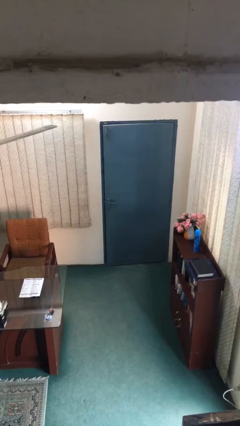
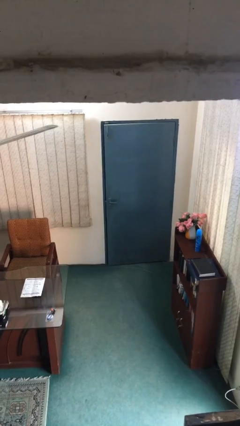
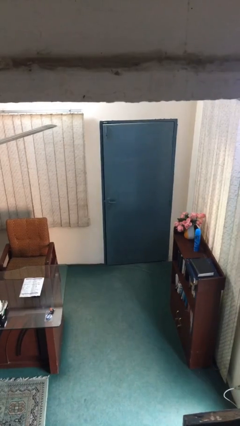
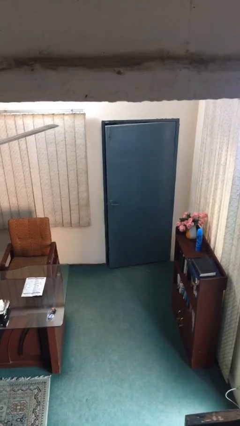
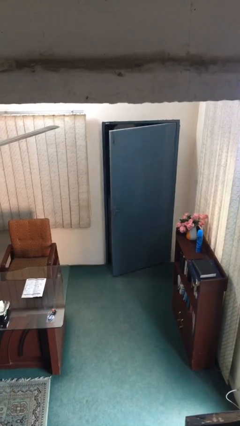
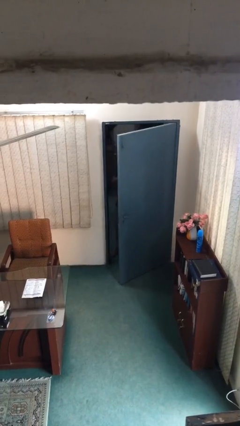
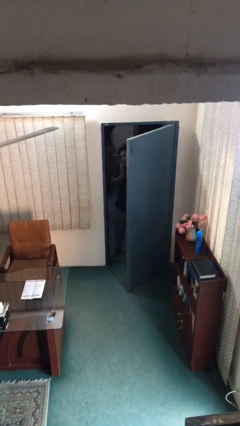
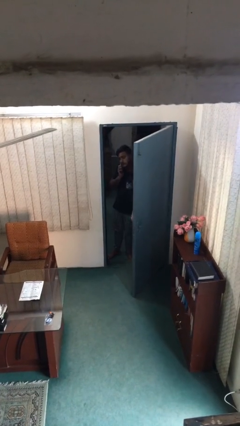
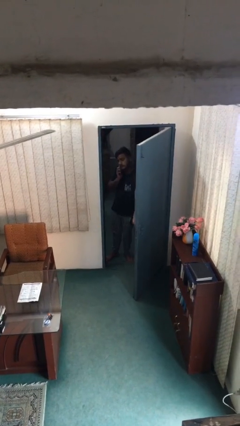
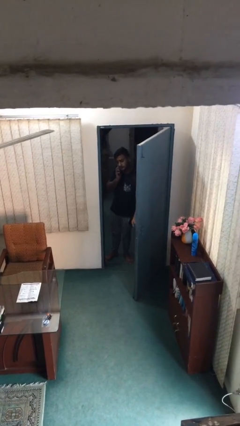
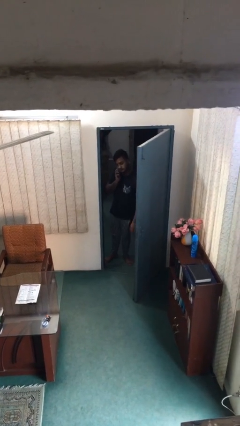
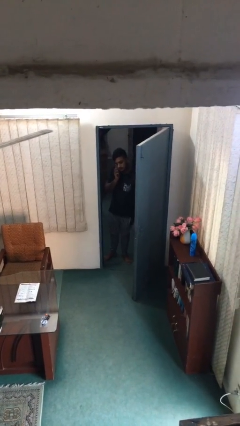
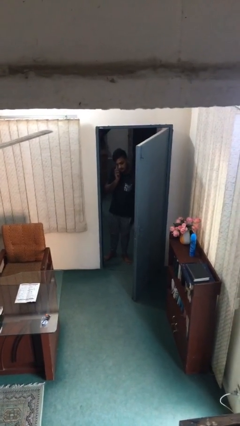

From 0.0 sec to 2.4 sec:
person opens facility door

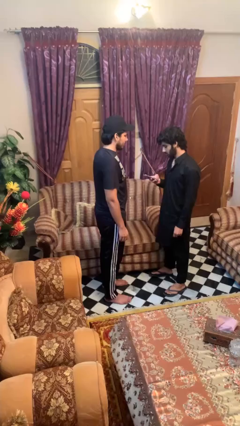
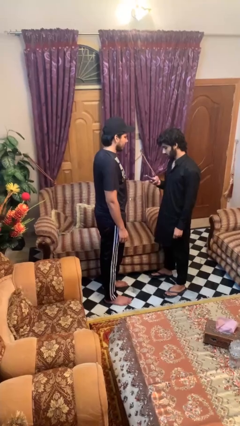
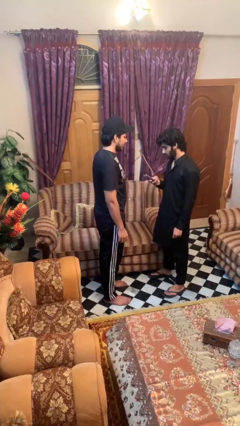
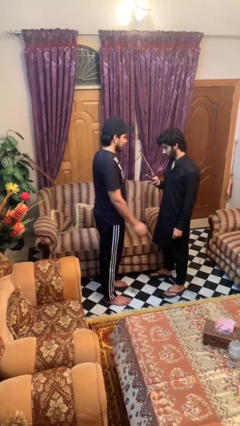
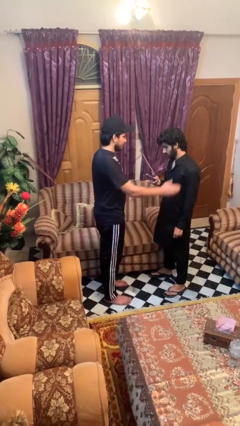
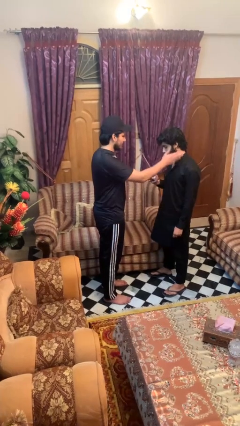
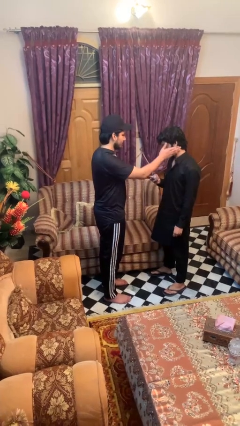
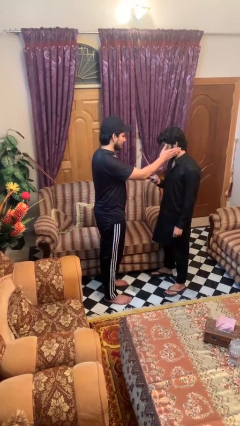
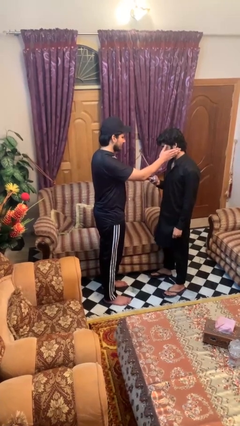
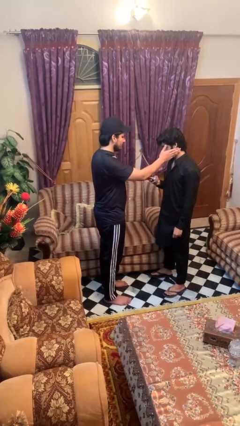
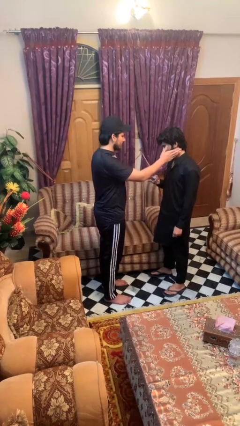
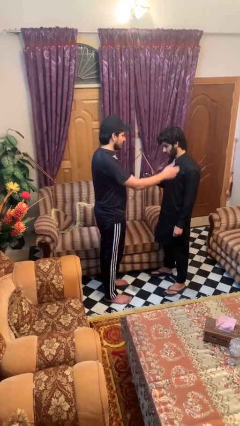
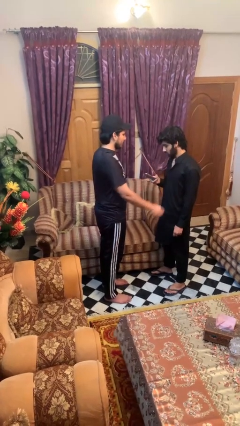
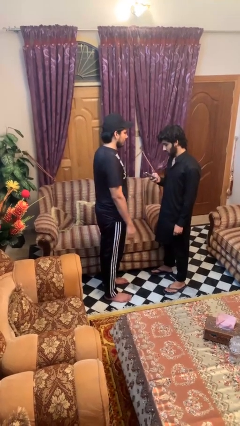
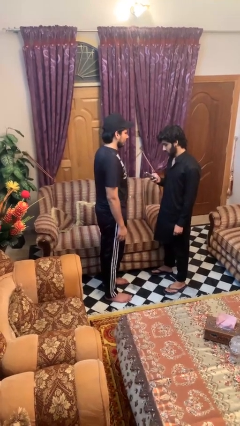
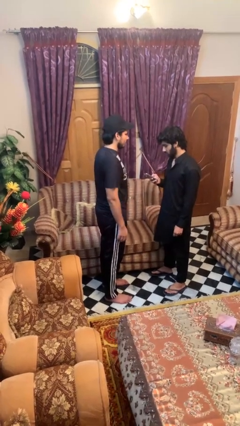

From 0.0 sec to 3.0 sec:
person touches face of person

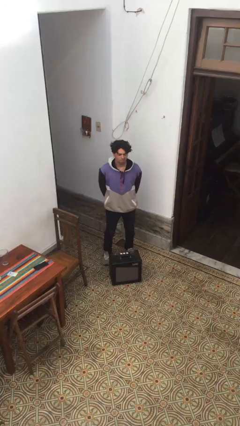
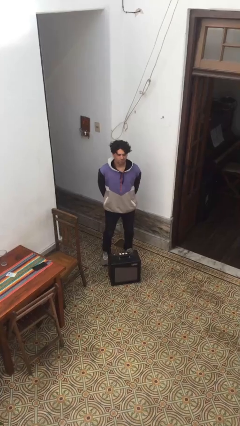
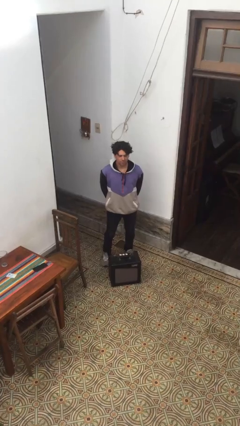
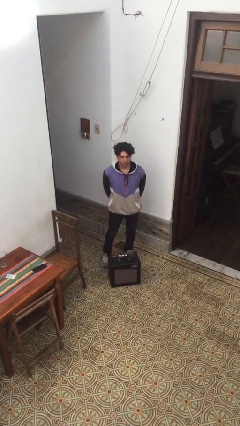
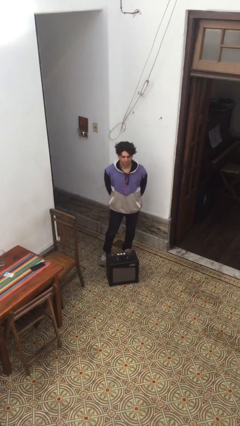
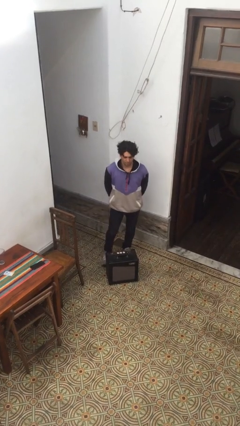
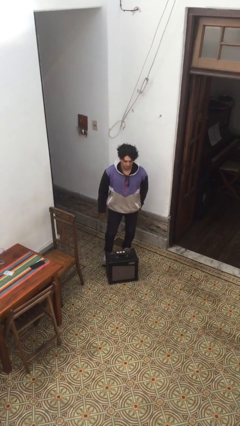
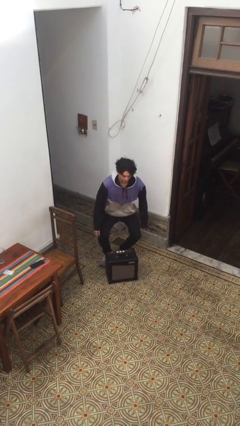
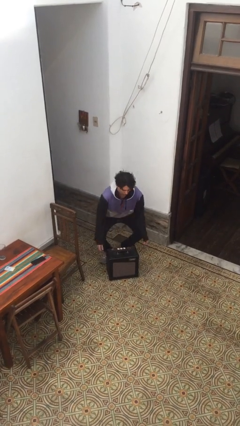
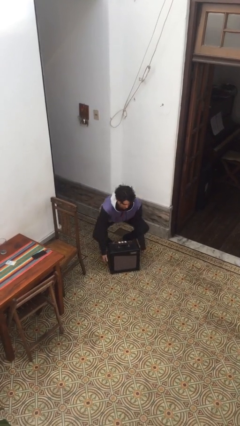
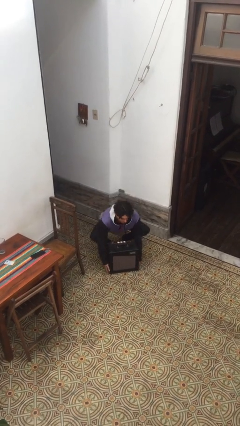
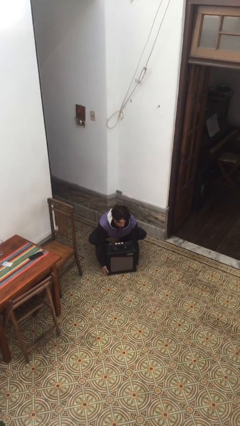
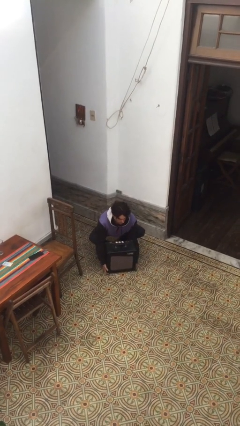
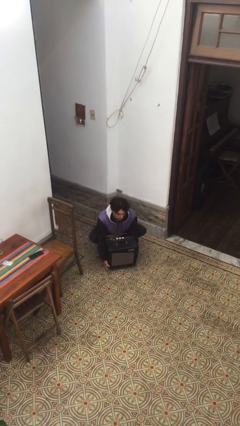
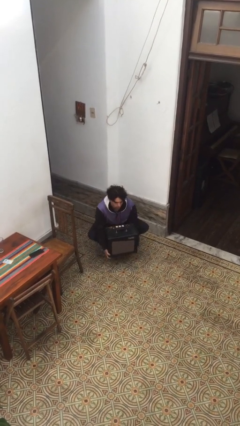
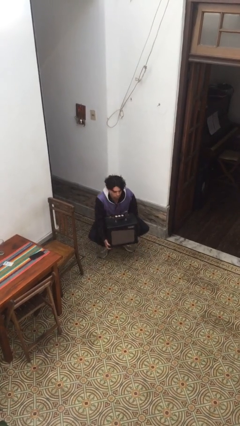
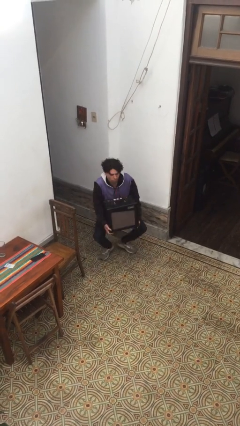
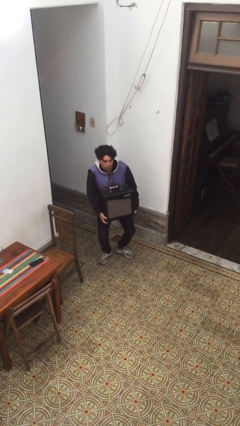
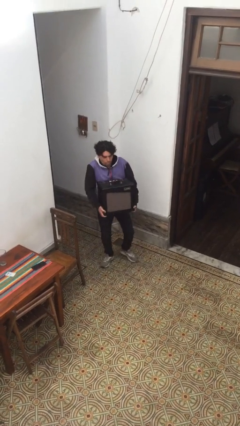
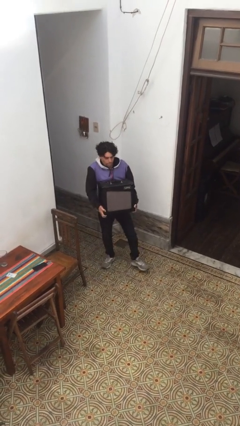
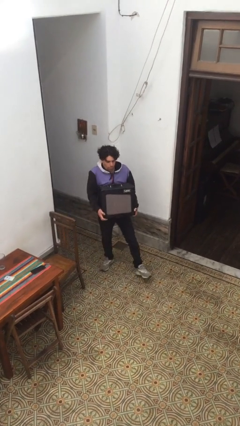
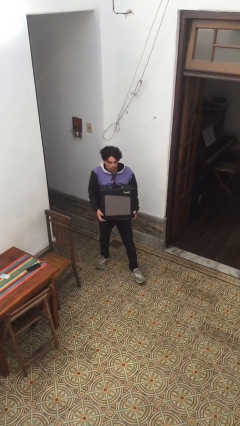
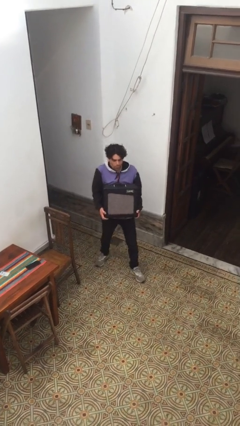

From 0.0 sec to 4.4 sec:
person picks up object from floor

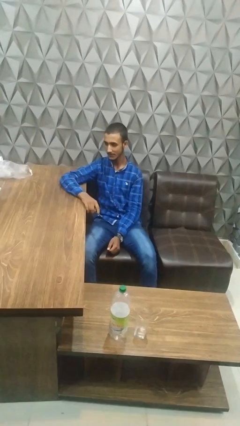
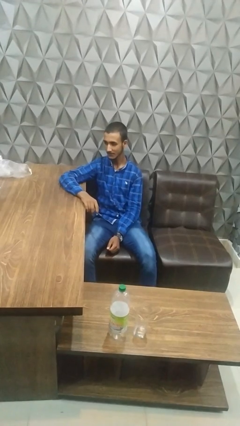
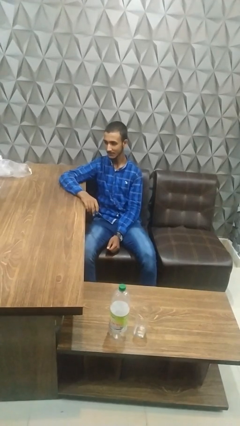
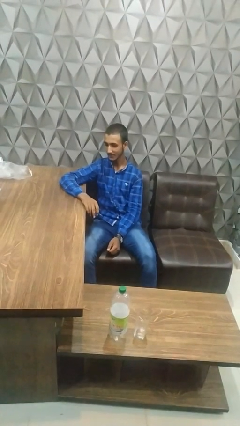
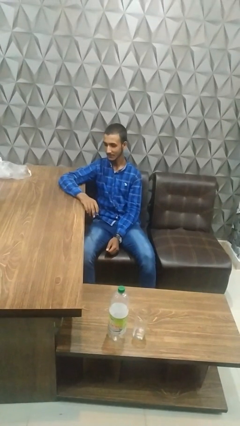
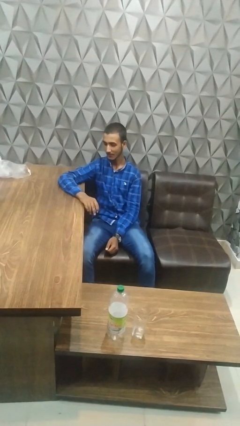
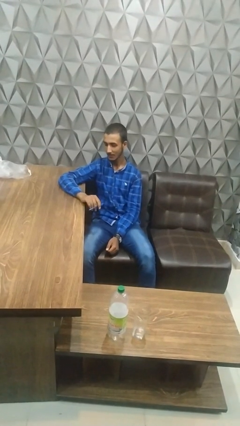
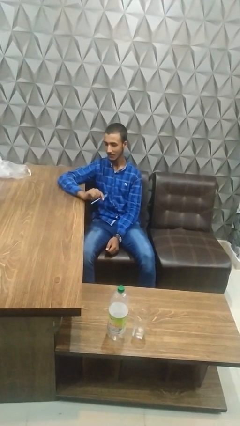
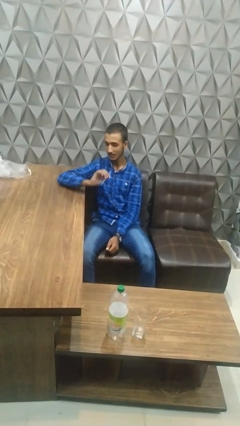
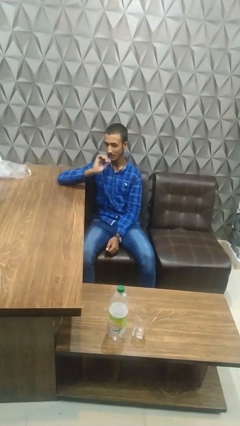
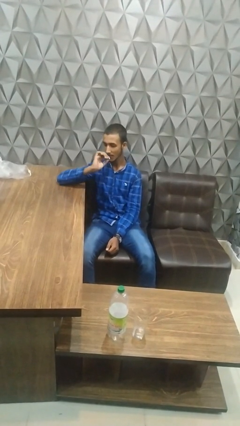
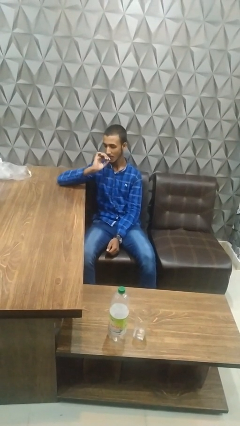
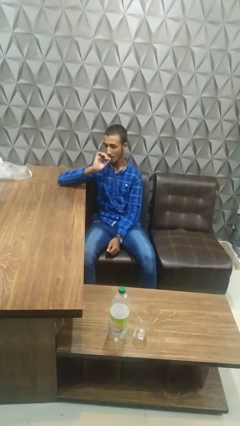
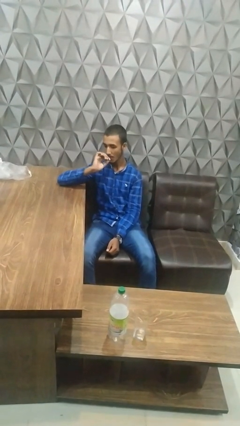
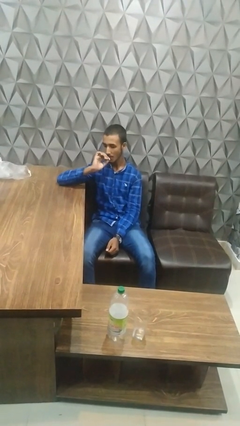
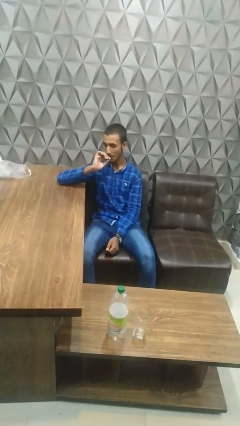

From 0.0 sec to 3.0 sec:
person vapes

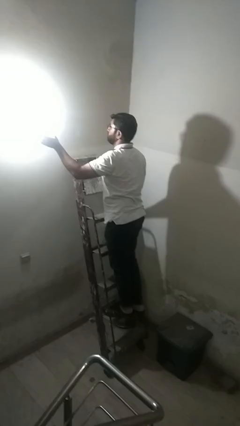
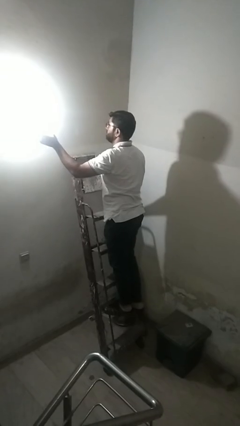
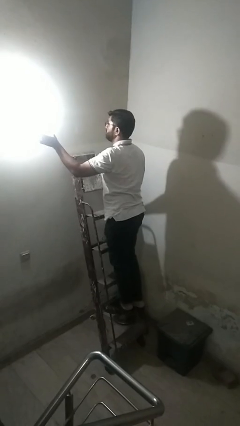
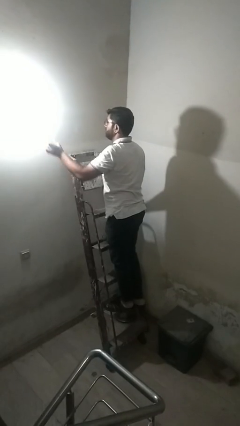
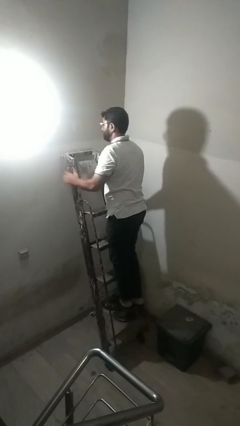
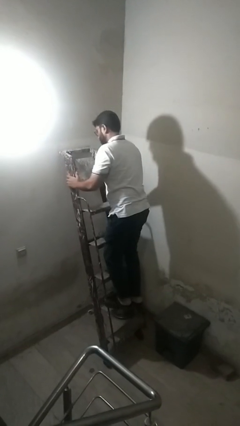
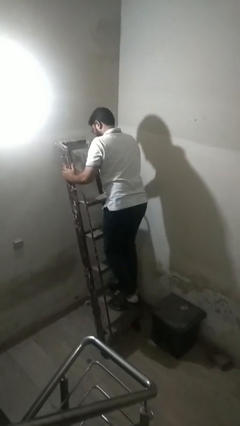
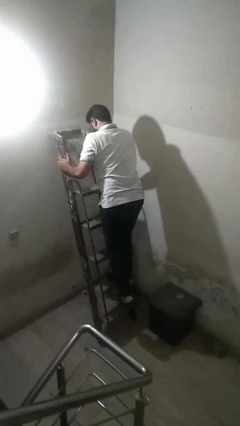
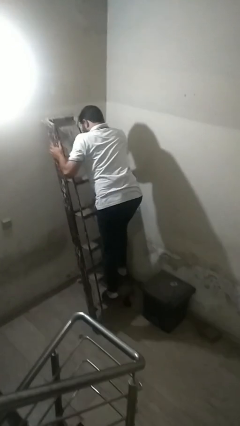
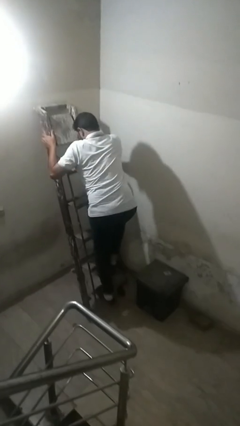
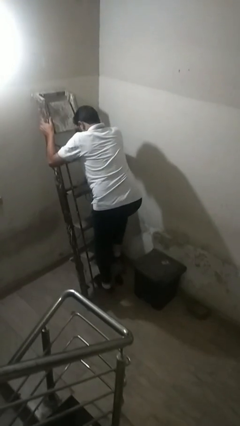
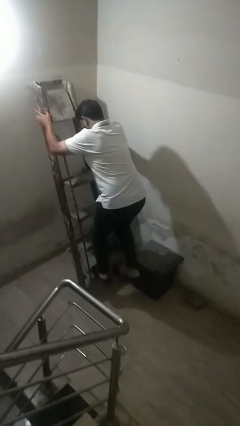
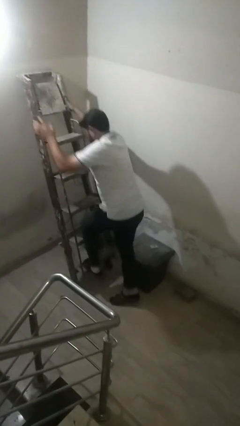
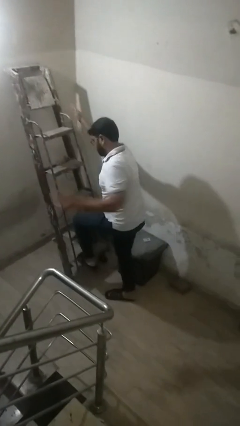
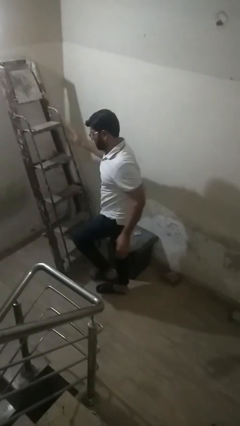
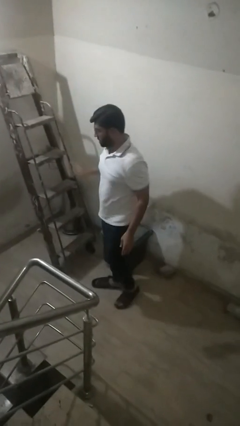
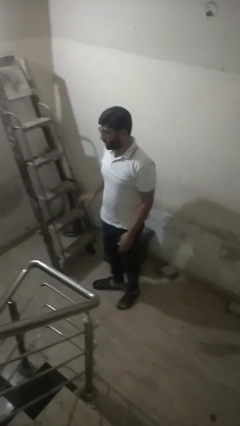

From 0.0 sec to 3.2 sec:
person climbs down ladder

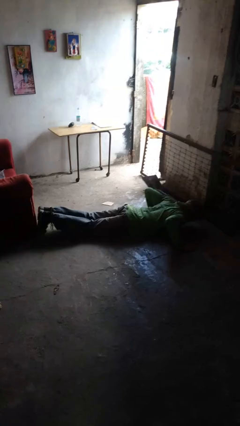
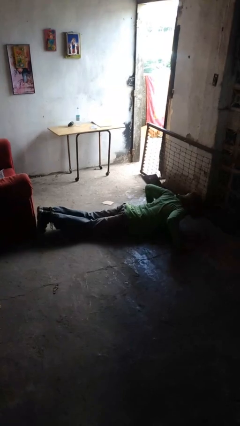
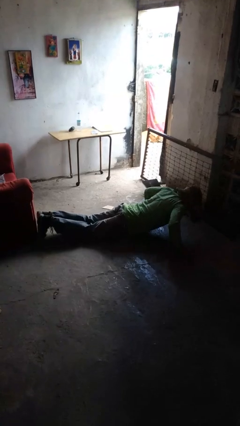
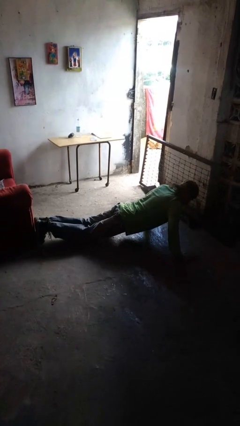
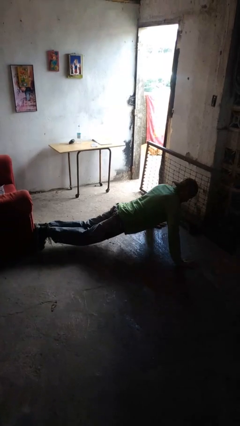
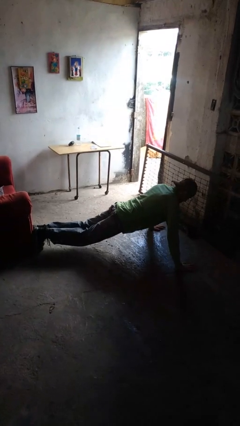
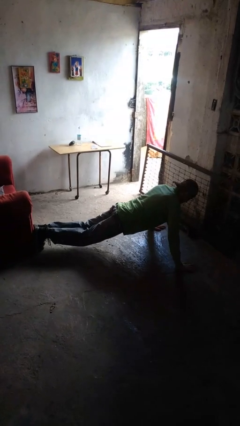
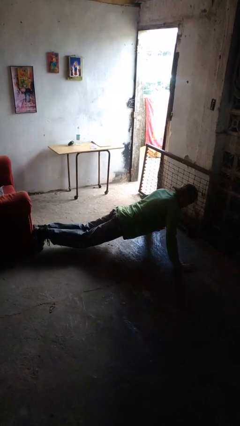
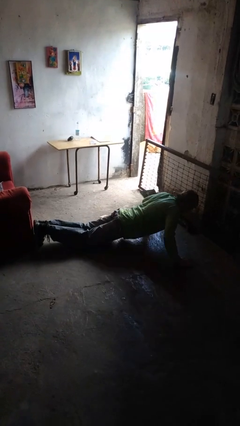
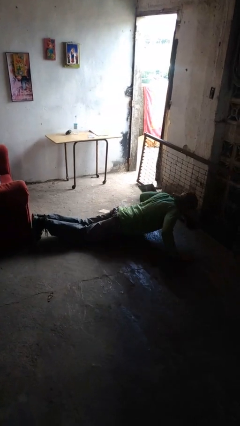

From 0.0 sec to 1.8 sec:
person exercises with pushup
